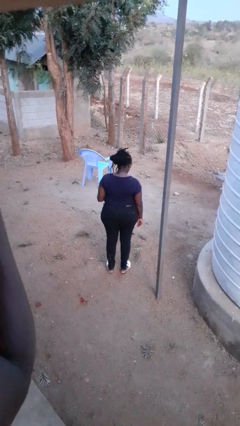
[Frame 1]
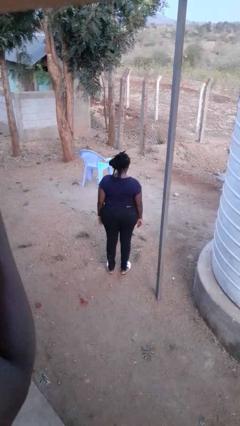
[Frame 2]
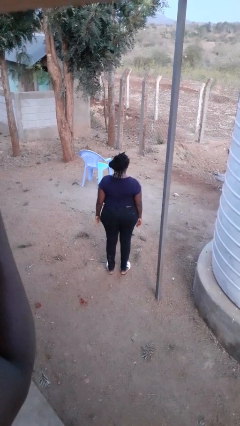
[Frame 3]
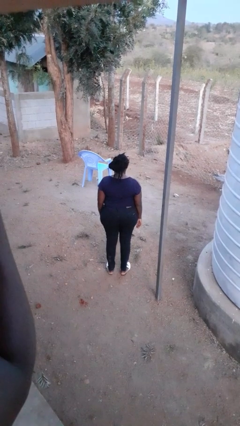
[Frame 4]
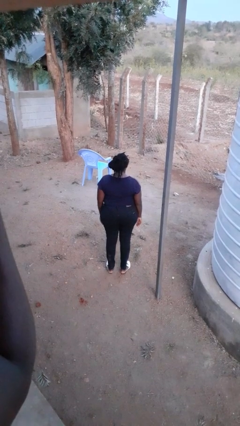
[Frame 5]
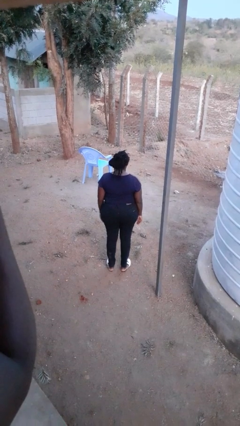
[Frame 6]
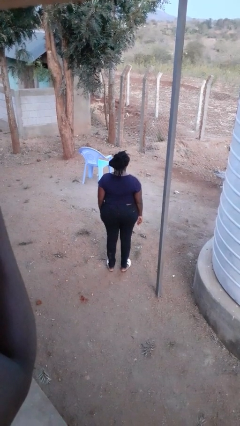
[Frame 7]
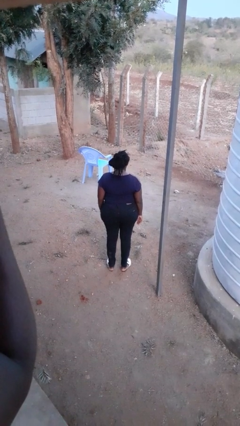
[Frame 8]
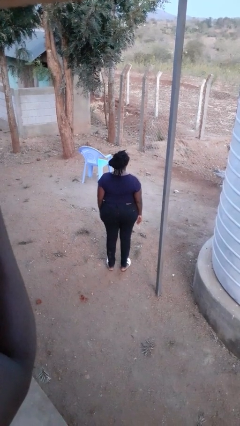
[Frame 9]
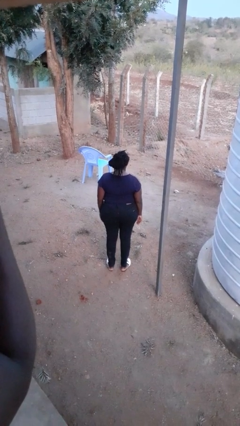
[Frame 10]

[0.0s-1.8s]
person rubs neck

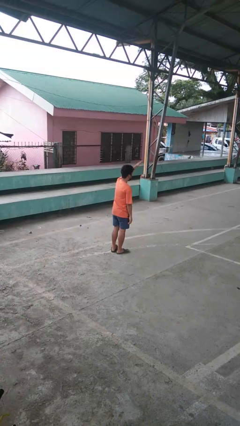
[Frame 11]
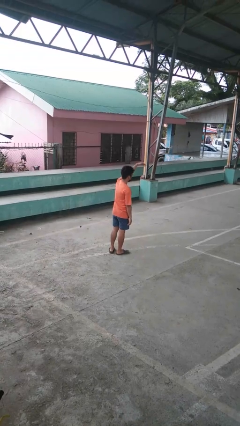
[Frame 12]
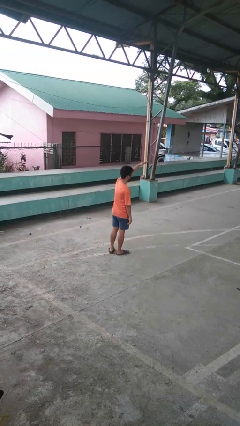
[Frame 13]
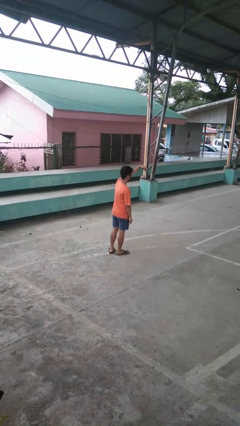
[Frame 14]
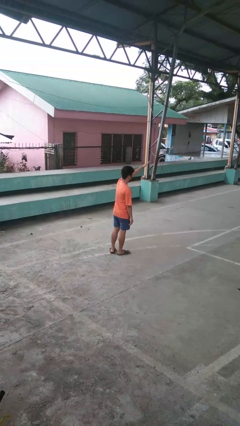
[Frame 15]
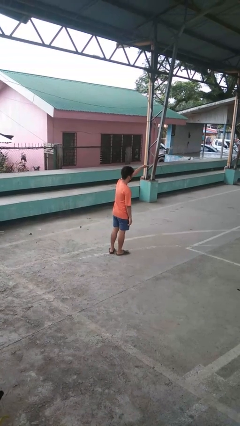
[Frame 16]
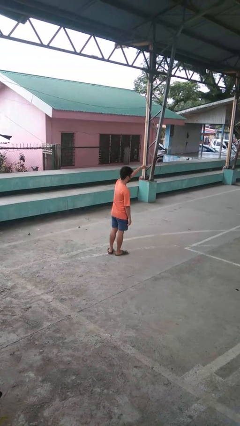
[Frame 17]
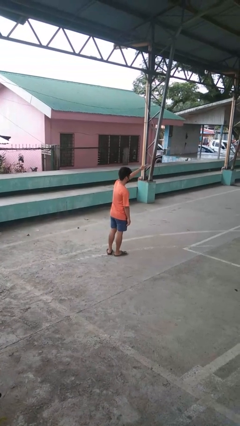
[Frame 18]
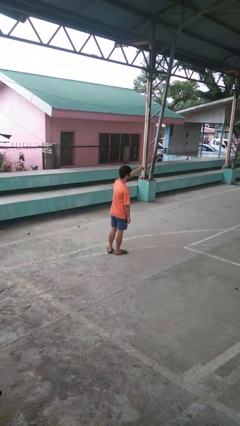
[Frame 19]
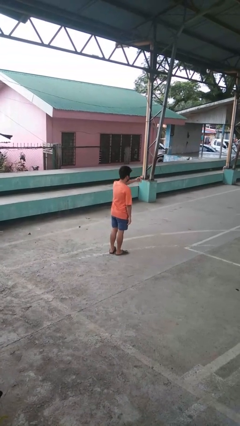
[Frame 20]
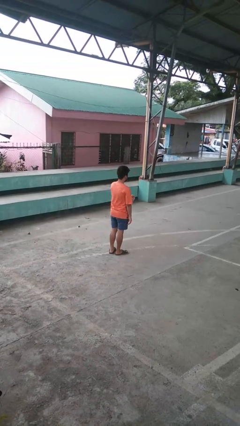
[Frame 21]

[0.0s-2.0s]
person gestures come here

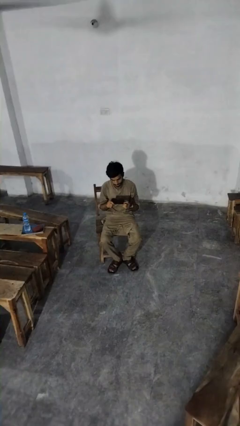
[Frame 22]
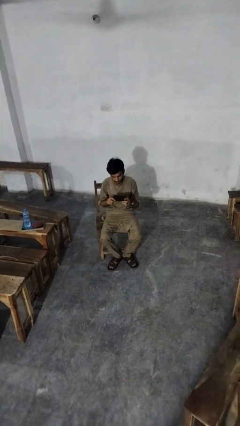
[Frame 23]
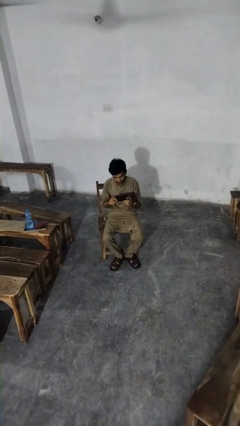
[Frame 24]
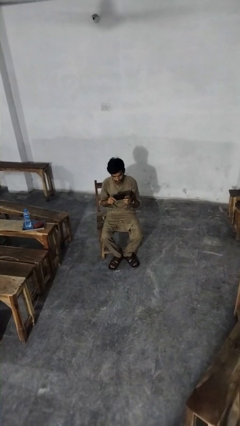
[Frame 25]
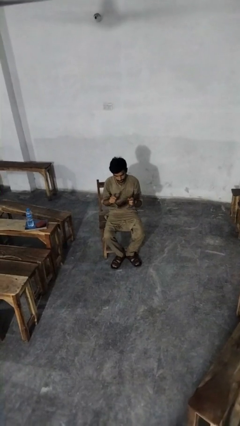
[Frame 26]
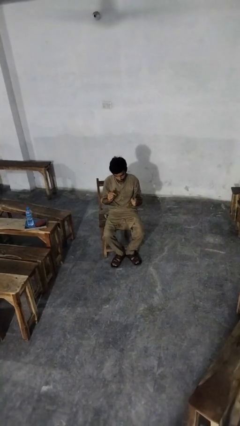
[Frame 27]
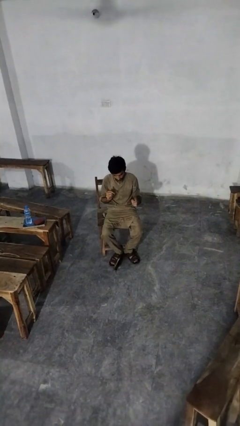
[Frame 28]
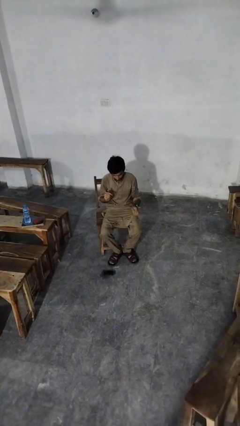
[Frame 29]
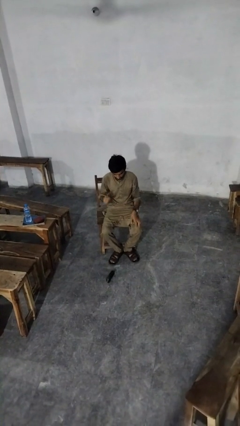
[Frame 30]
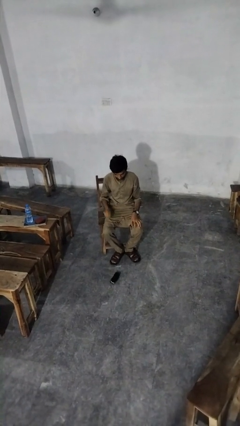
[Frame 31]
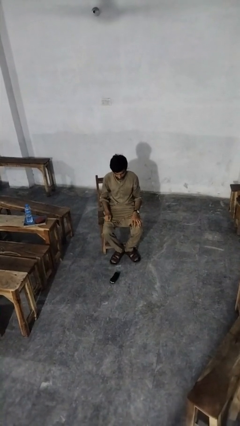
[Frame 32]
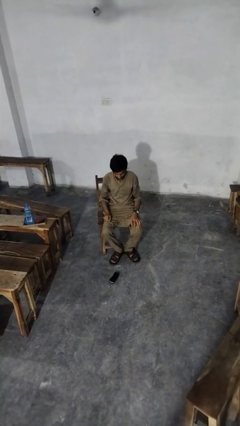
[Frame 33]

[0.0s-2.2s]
person drops object

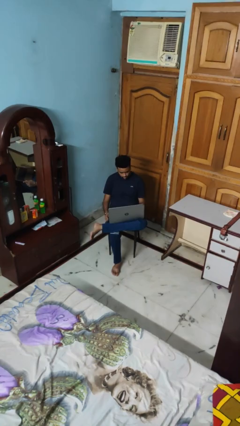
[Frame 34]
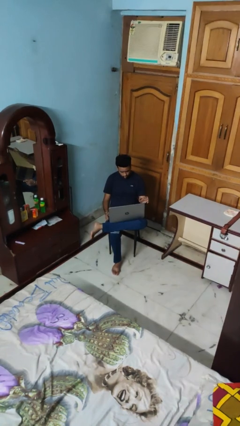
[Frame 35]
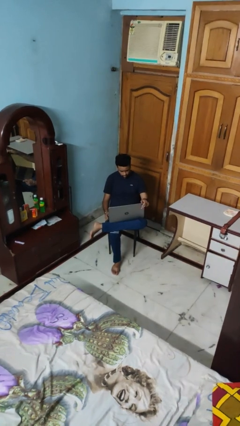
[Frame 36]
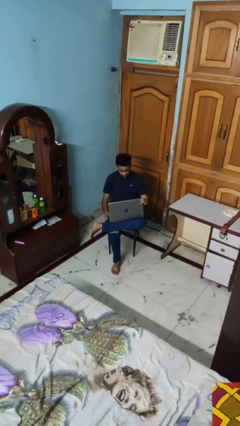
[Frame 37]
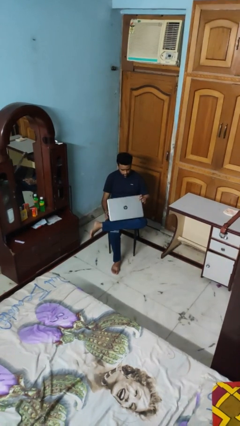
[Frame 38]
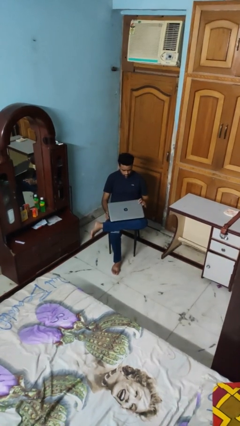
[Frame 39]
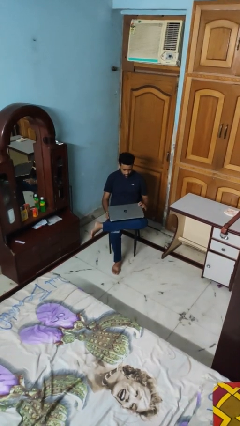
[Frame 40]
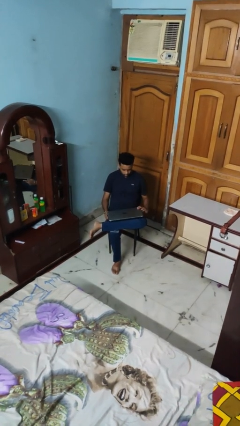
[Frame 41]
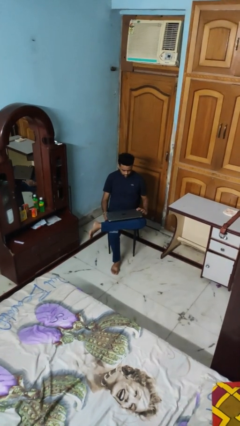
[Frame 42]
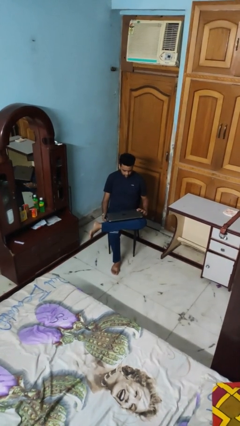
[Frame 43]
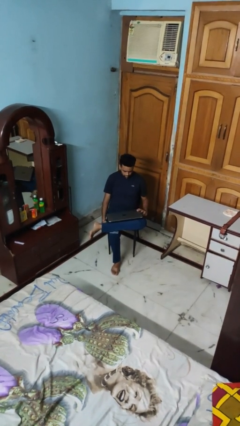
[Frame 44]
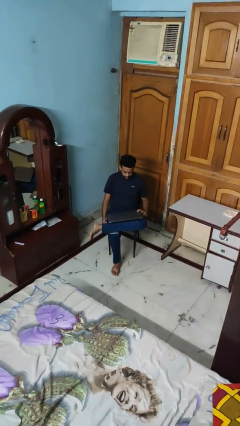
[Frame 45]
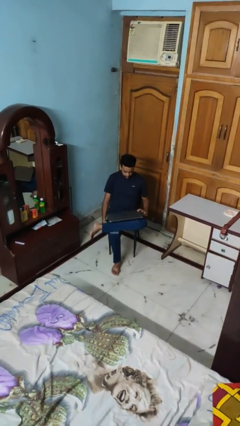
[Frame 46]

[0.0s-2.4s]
person closes laptop

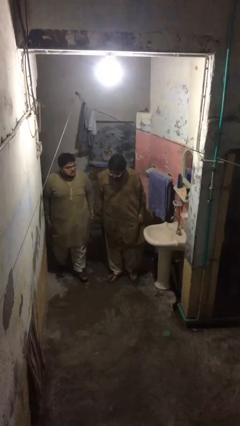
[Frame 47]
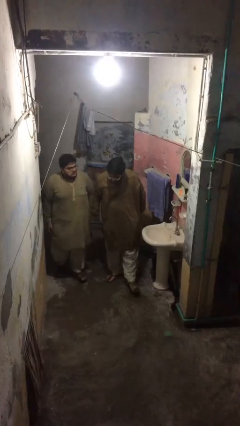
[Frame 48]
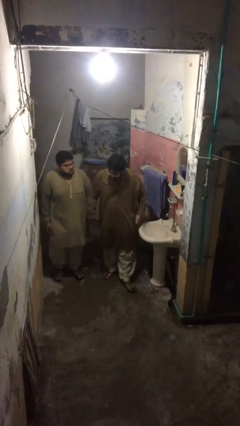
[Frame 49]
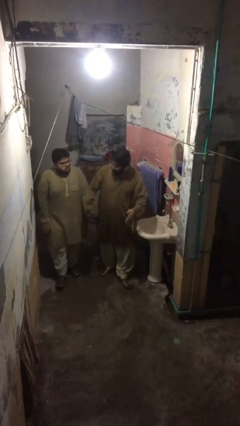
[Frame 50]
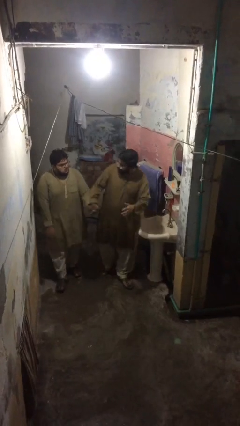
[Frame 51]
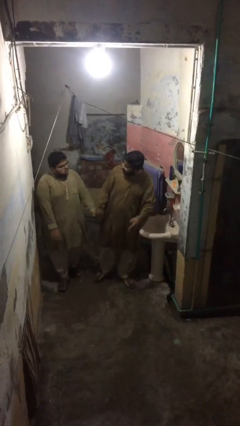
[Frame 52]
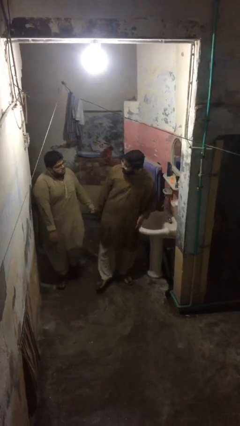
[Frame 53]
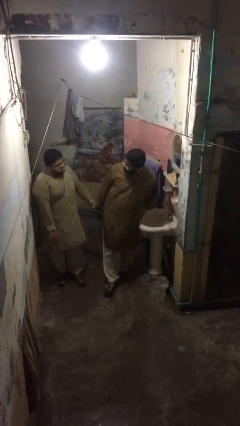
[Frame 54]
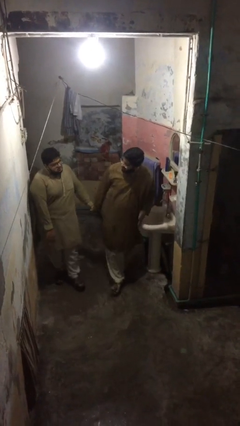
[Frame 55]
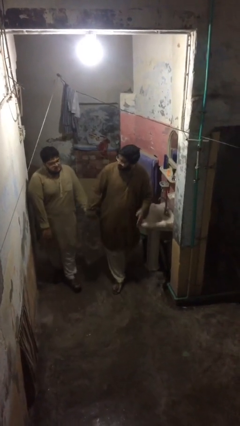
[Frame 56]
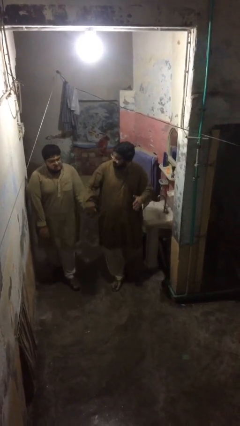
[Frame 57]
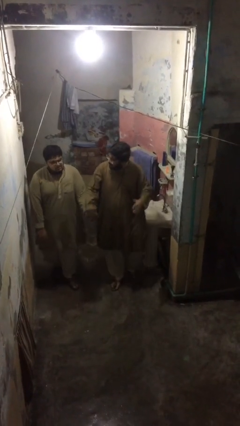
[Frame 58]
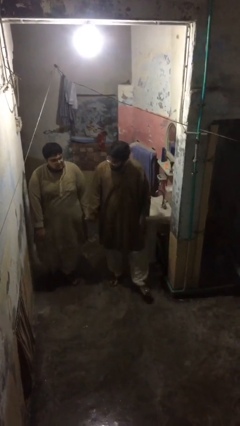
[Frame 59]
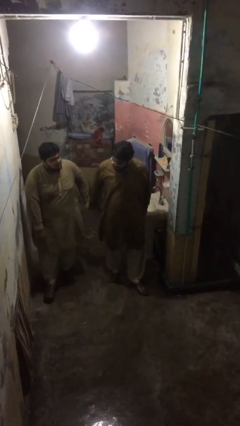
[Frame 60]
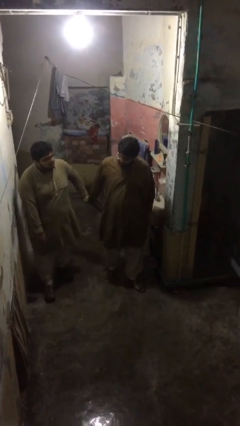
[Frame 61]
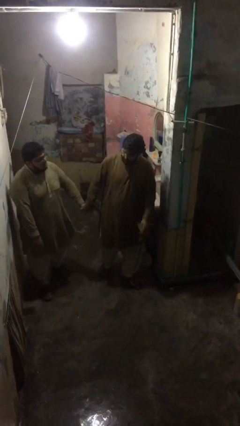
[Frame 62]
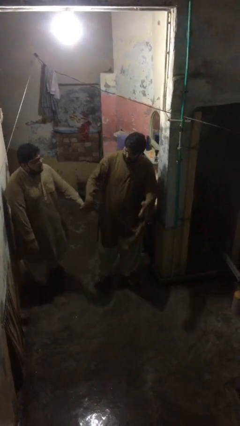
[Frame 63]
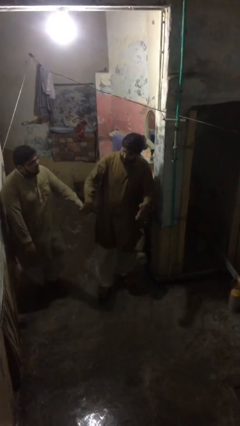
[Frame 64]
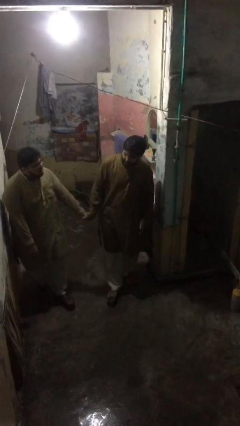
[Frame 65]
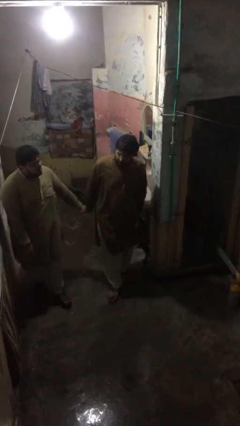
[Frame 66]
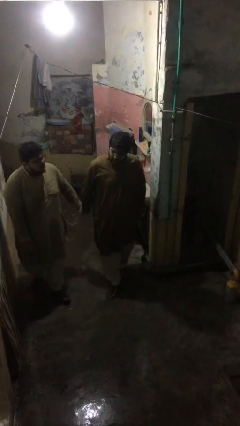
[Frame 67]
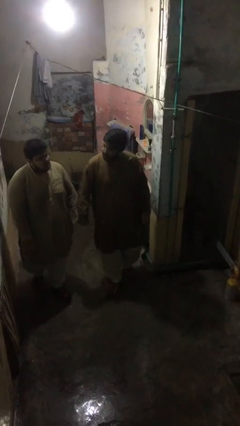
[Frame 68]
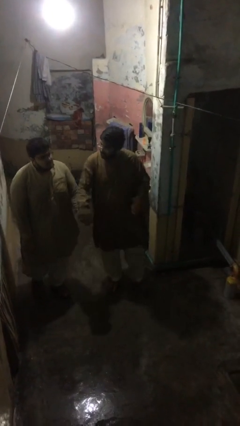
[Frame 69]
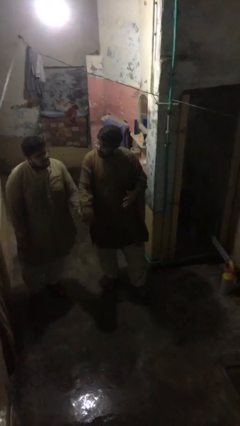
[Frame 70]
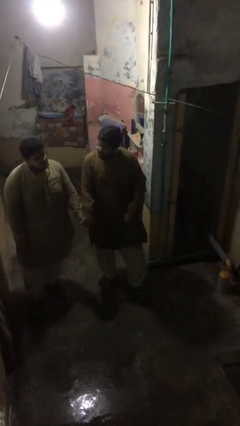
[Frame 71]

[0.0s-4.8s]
person holds hand

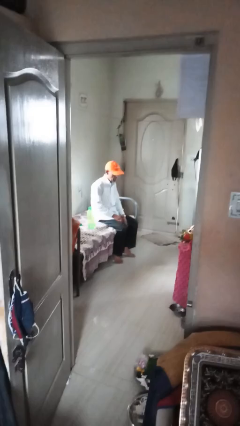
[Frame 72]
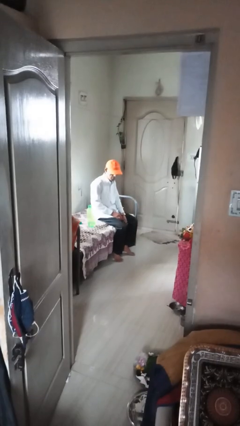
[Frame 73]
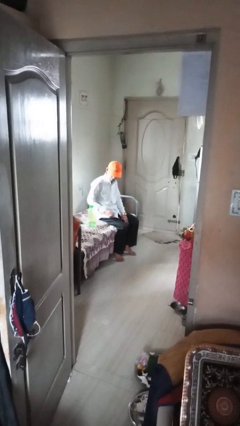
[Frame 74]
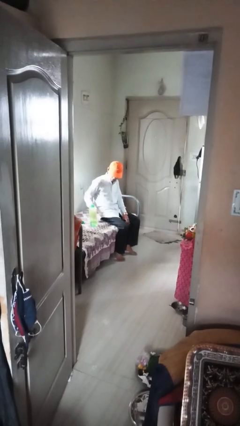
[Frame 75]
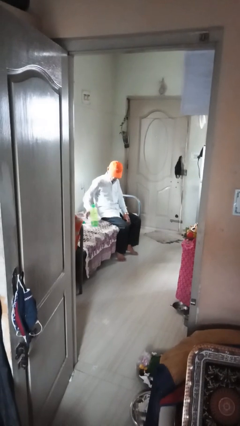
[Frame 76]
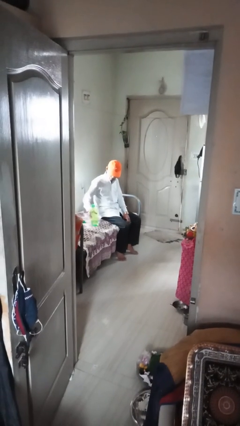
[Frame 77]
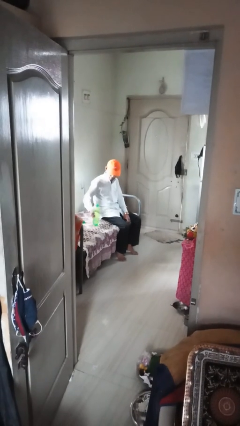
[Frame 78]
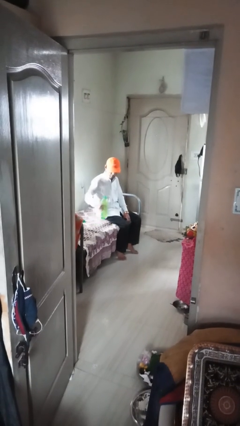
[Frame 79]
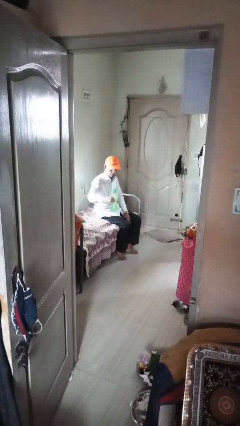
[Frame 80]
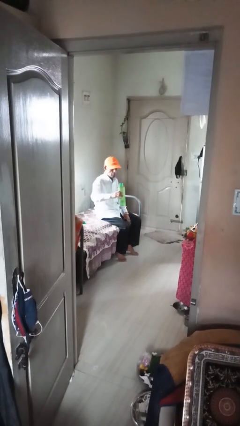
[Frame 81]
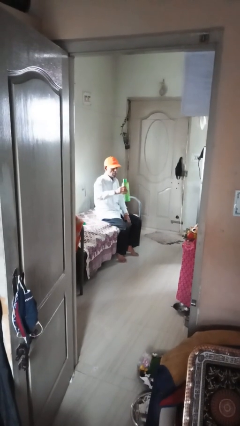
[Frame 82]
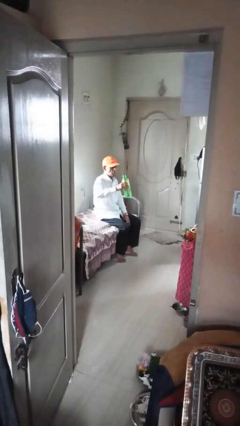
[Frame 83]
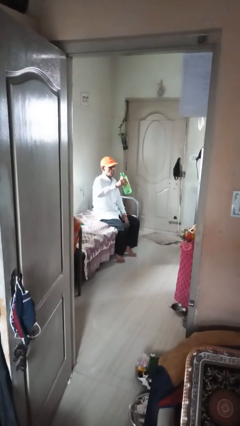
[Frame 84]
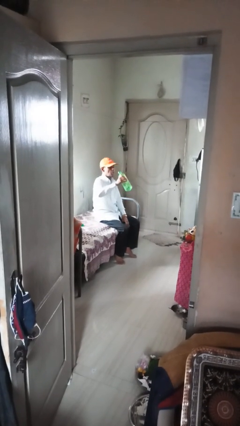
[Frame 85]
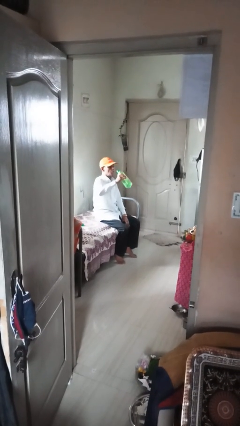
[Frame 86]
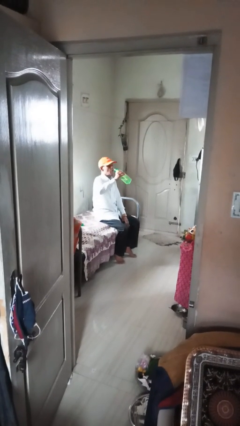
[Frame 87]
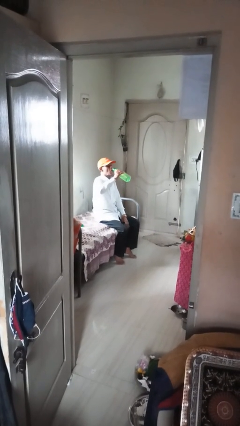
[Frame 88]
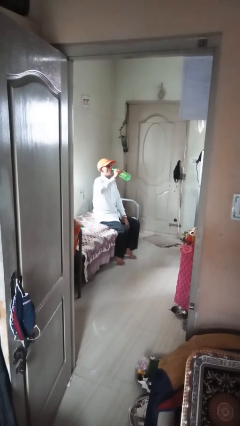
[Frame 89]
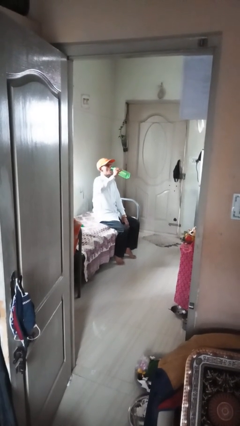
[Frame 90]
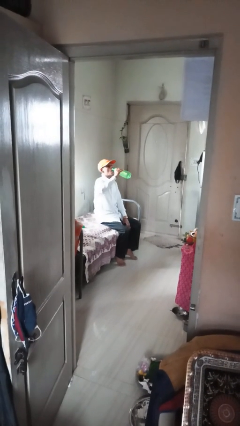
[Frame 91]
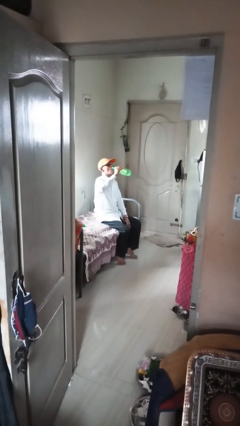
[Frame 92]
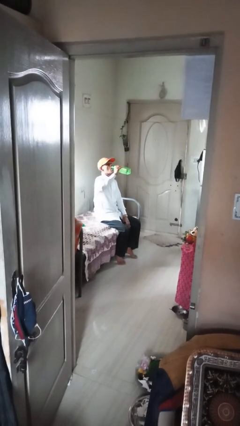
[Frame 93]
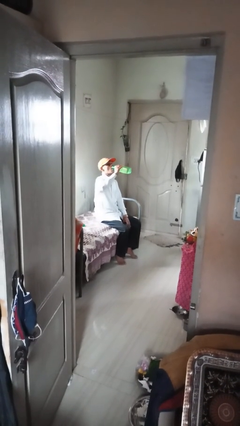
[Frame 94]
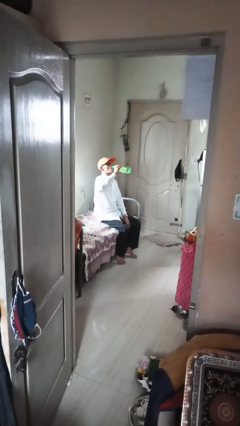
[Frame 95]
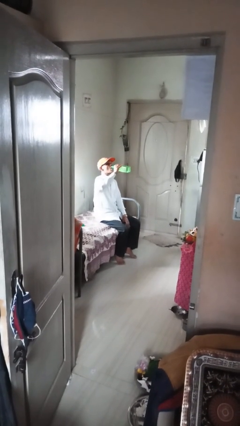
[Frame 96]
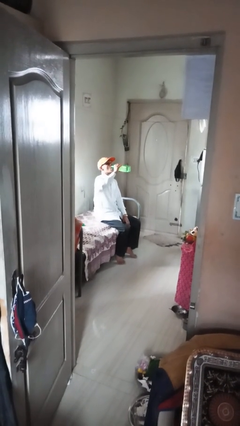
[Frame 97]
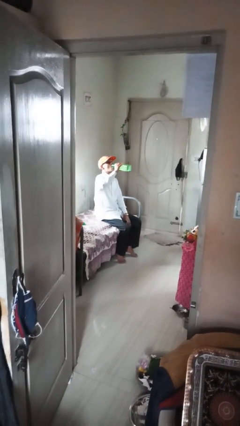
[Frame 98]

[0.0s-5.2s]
person drinks from bottle
